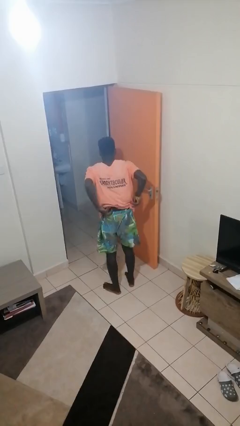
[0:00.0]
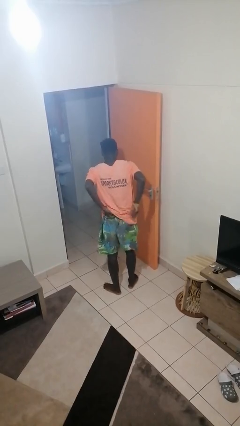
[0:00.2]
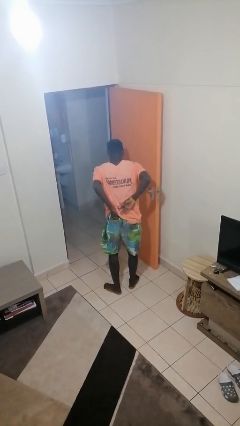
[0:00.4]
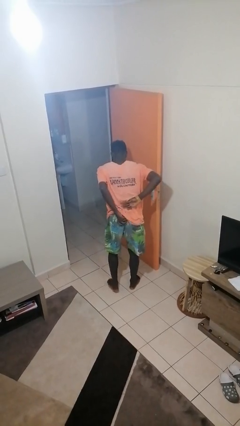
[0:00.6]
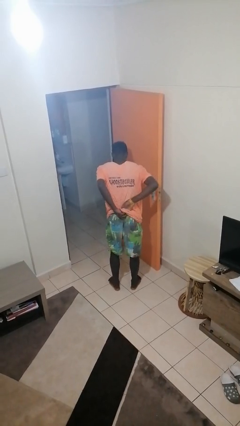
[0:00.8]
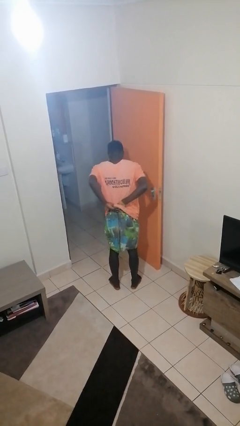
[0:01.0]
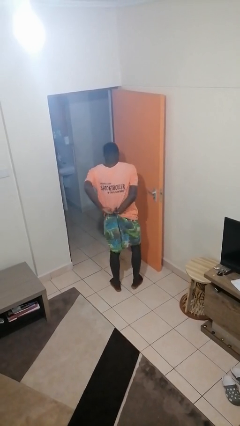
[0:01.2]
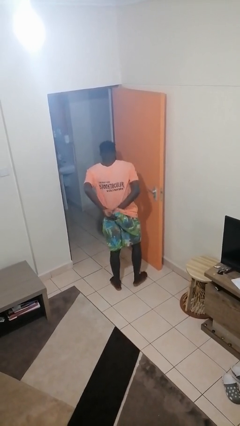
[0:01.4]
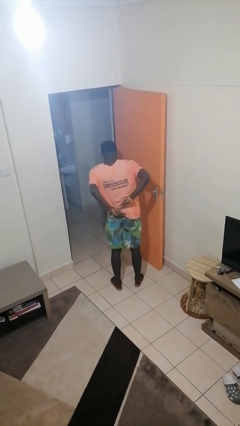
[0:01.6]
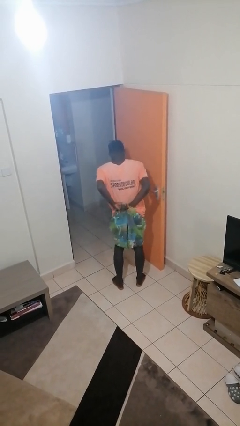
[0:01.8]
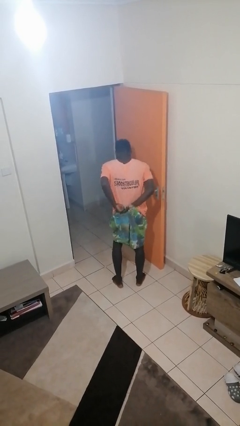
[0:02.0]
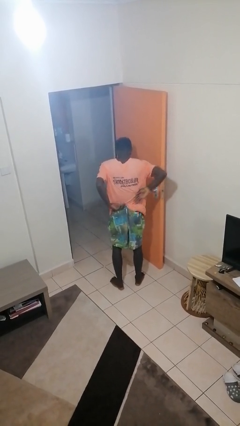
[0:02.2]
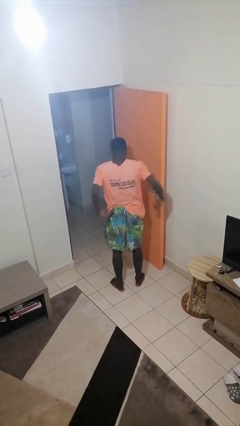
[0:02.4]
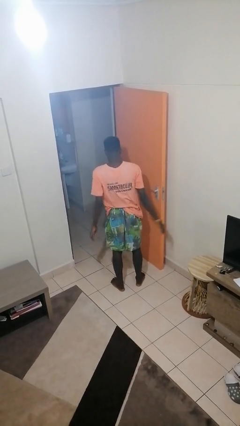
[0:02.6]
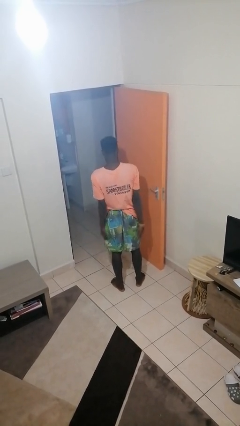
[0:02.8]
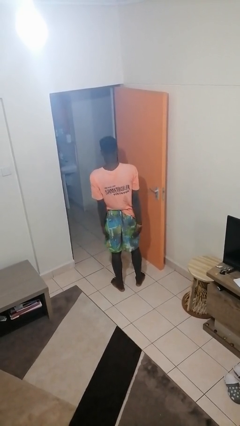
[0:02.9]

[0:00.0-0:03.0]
person tucks in shirt

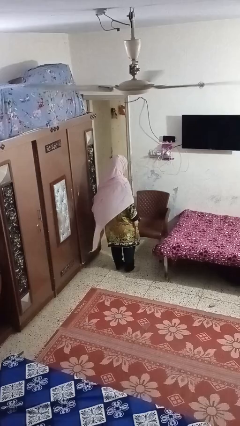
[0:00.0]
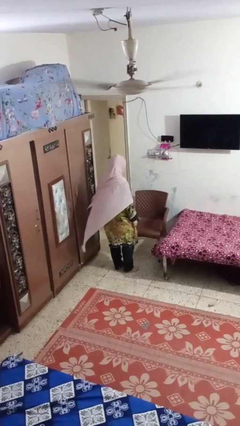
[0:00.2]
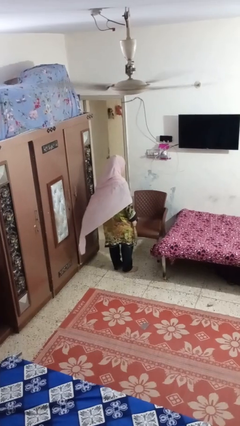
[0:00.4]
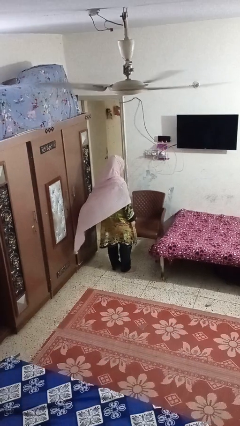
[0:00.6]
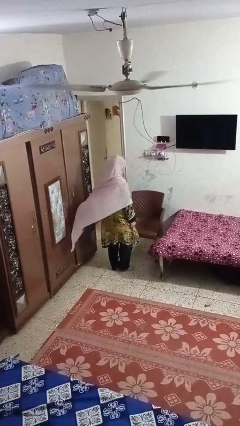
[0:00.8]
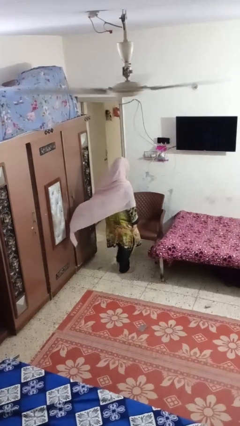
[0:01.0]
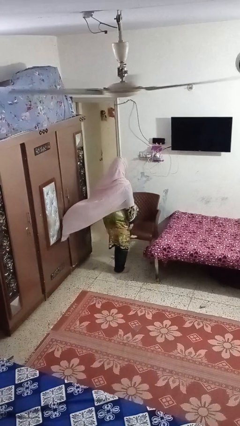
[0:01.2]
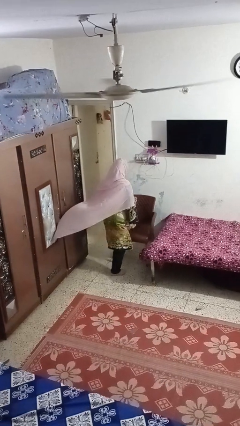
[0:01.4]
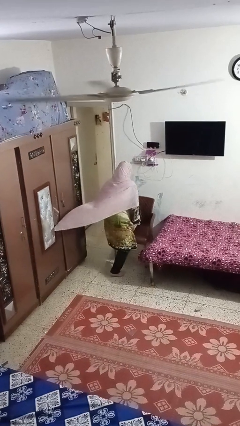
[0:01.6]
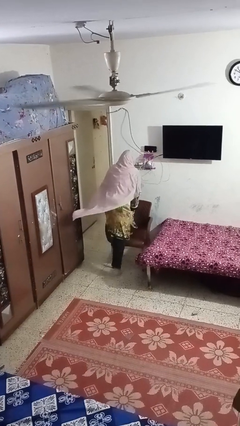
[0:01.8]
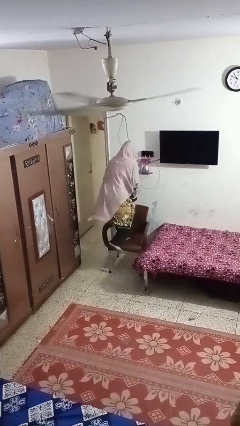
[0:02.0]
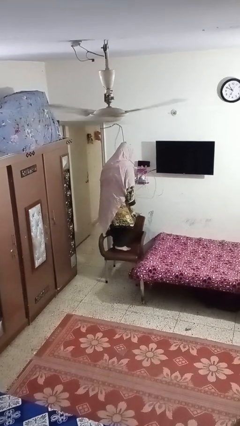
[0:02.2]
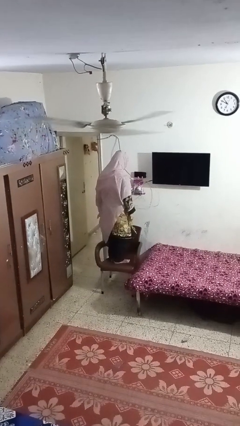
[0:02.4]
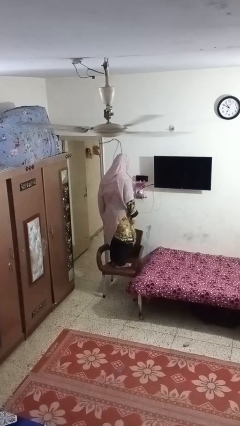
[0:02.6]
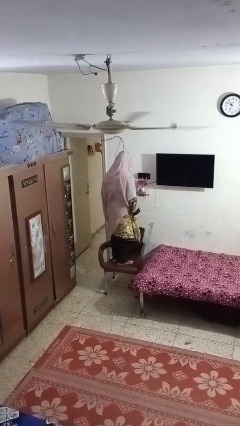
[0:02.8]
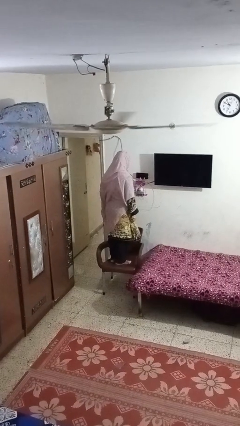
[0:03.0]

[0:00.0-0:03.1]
person climbs on chair

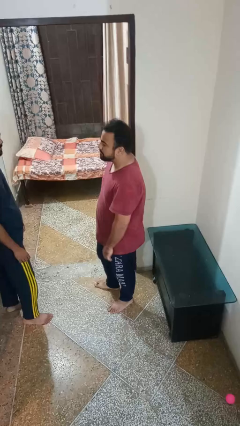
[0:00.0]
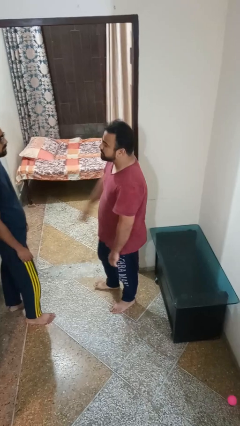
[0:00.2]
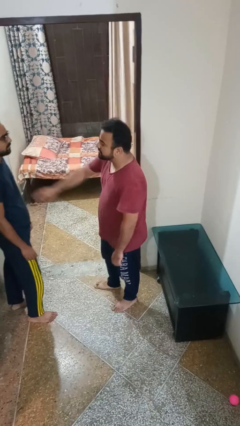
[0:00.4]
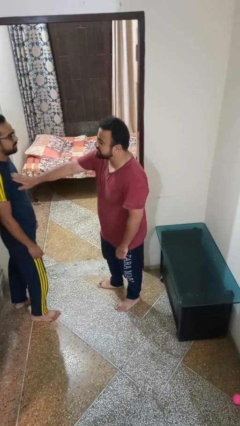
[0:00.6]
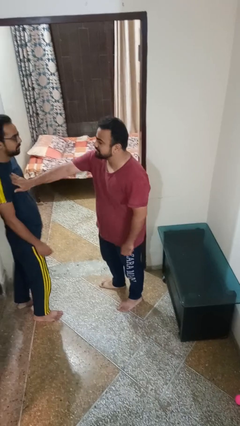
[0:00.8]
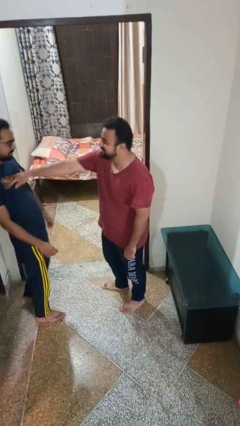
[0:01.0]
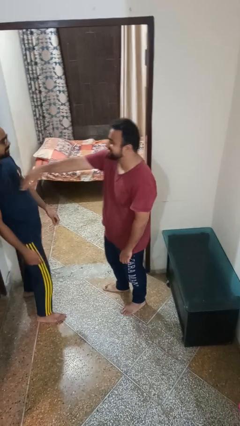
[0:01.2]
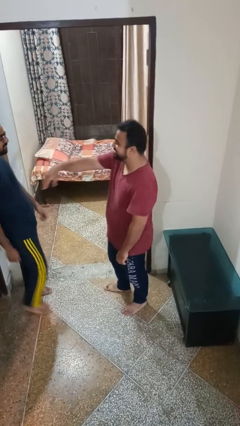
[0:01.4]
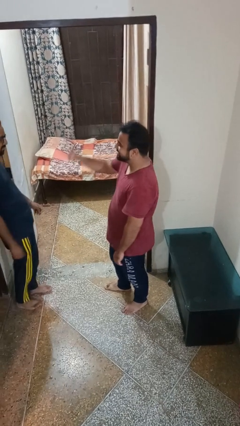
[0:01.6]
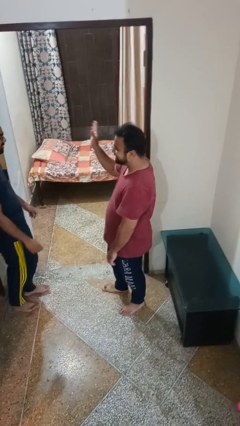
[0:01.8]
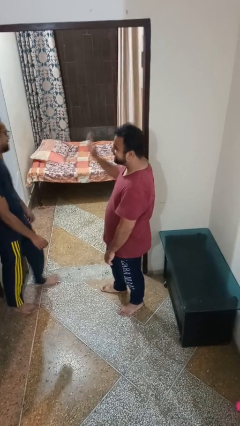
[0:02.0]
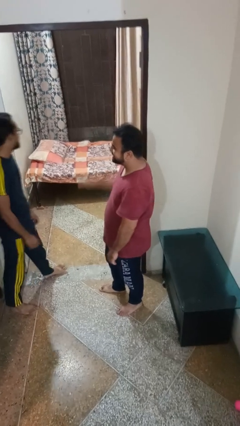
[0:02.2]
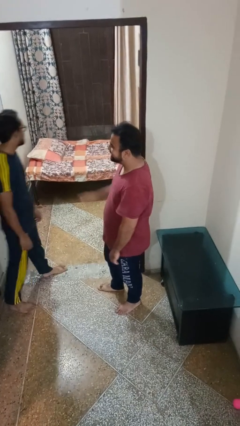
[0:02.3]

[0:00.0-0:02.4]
person shoves person

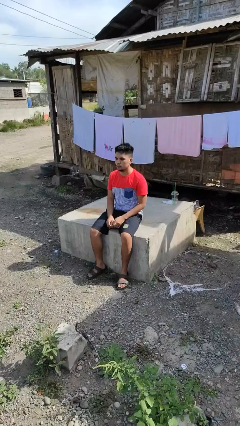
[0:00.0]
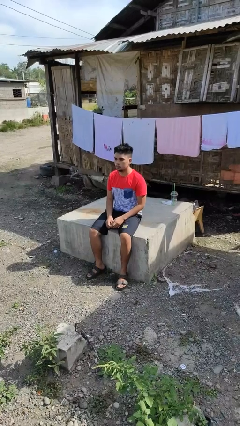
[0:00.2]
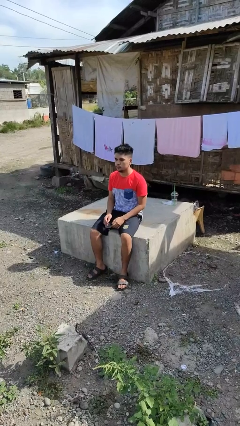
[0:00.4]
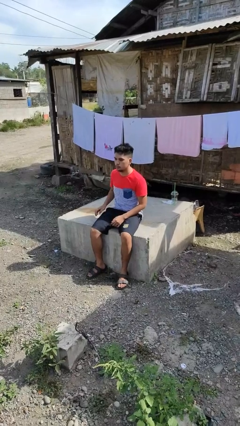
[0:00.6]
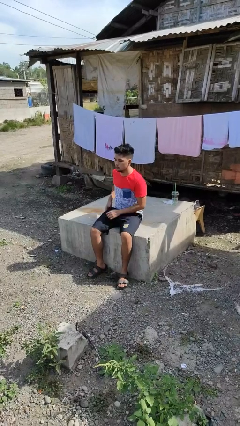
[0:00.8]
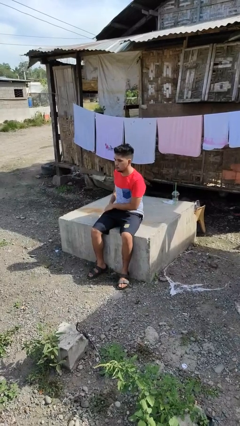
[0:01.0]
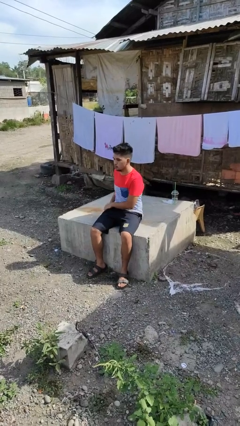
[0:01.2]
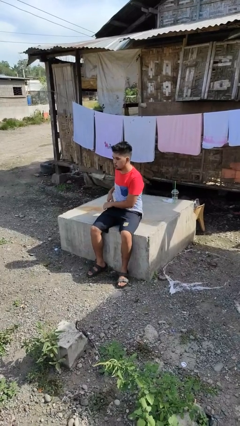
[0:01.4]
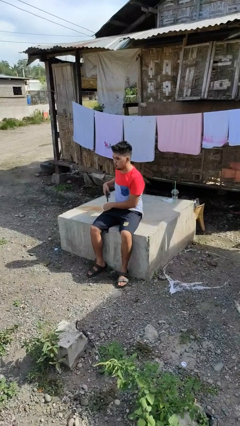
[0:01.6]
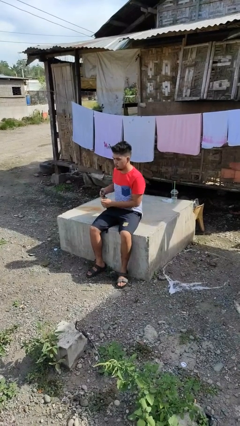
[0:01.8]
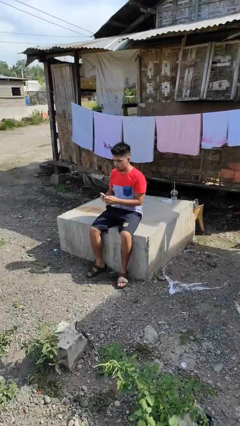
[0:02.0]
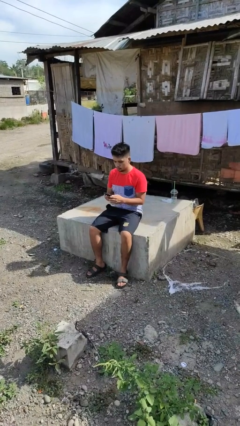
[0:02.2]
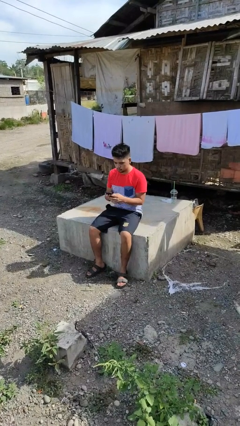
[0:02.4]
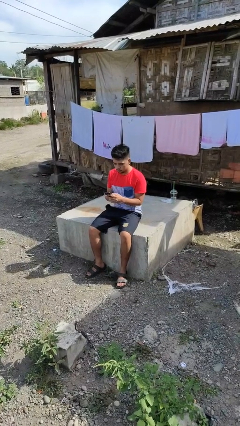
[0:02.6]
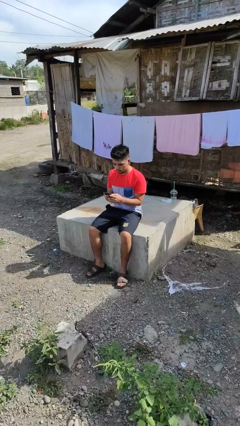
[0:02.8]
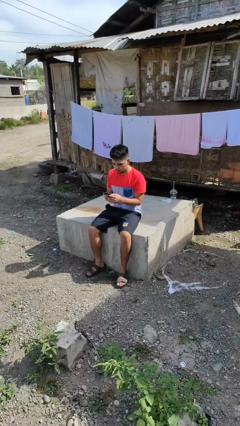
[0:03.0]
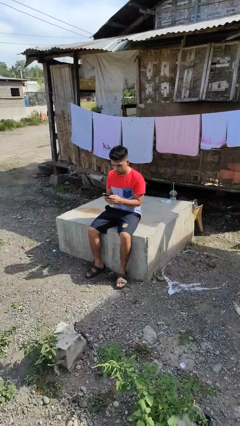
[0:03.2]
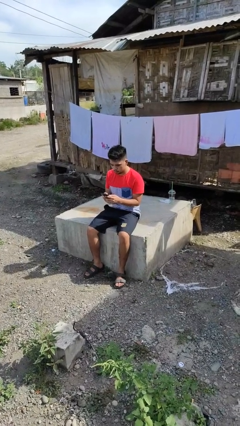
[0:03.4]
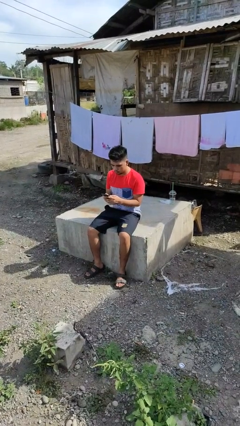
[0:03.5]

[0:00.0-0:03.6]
person takes phone from pocket

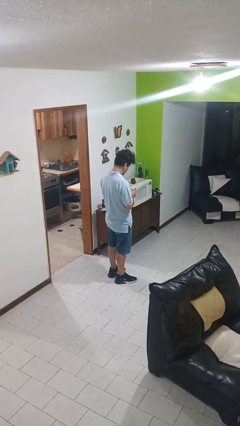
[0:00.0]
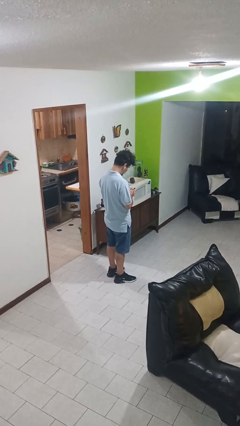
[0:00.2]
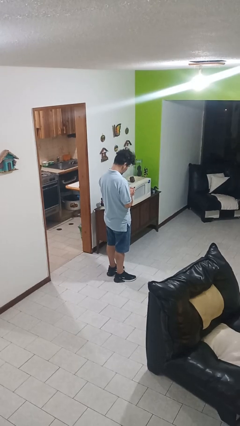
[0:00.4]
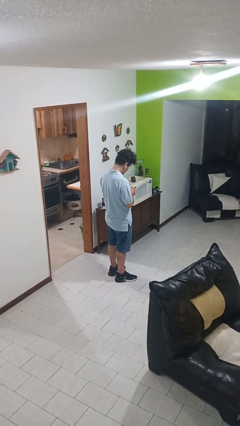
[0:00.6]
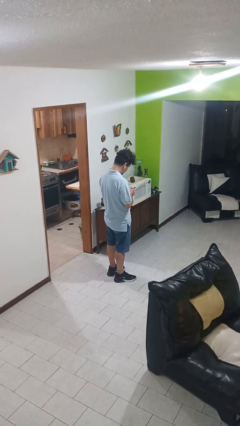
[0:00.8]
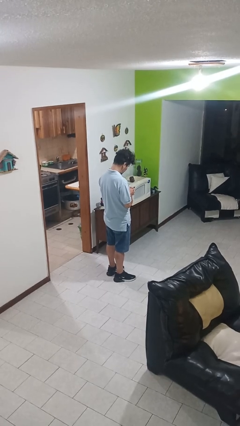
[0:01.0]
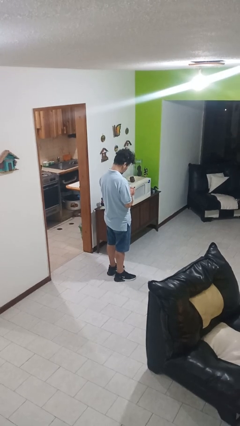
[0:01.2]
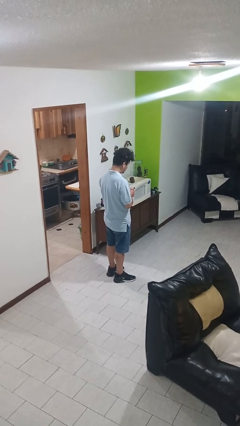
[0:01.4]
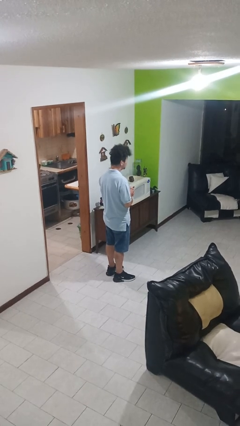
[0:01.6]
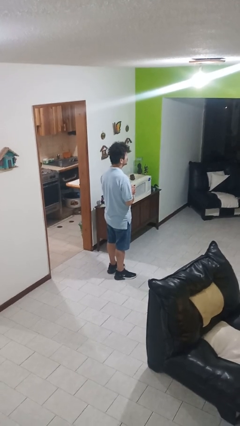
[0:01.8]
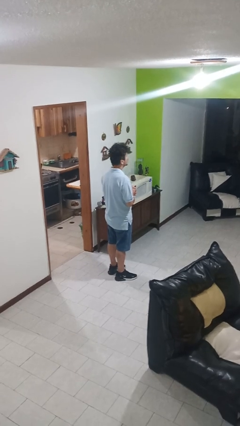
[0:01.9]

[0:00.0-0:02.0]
person prays

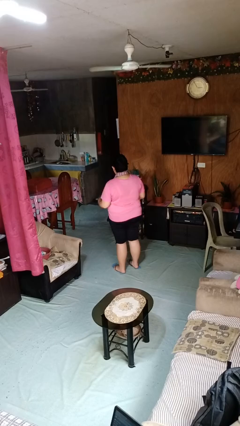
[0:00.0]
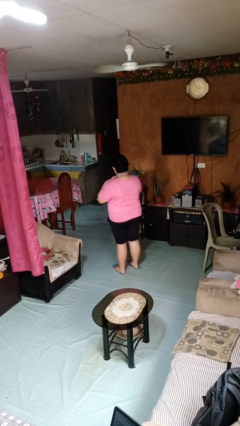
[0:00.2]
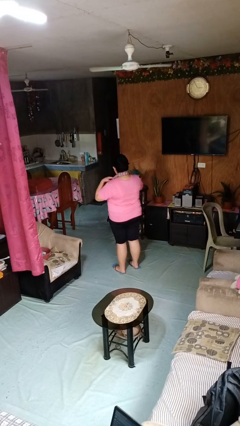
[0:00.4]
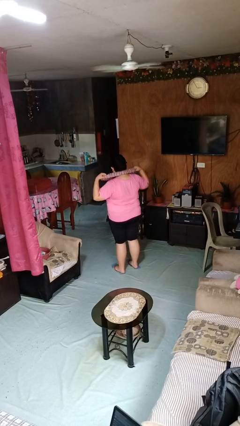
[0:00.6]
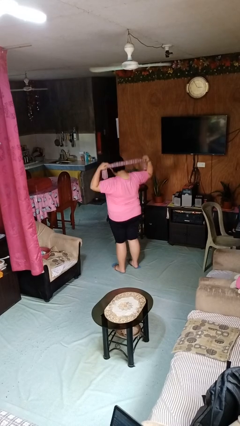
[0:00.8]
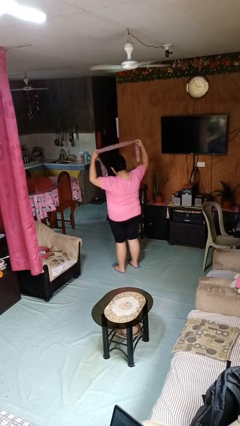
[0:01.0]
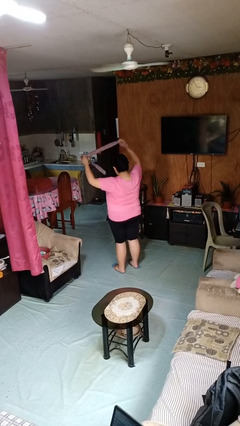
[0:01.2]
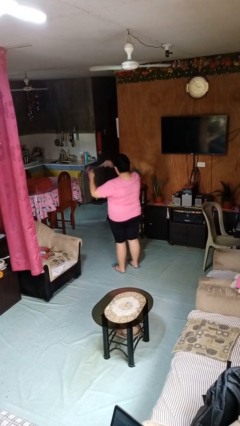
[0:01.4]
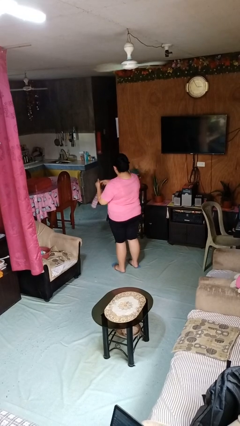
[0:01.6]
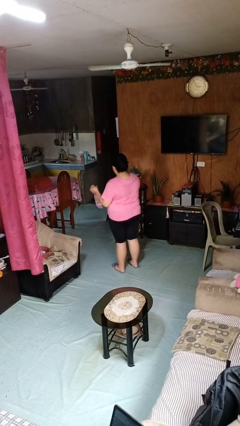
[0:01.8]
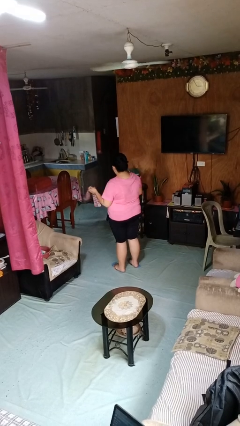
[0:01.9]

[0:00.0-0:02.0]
person takes off necktie

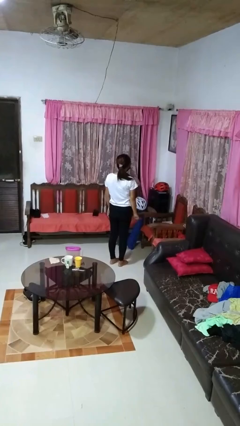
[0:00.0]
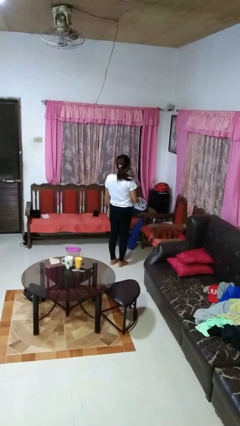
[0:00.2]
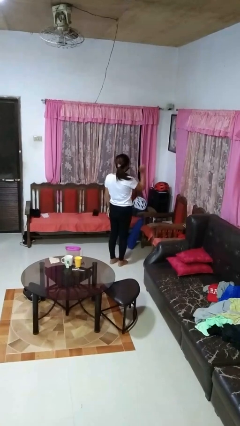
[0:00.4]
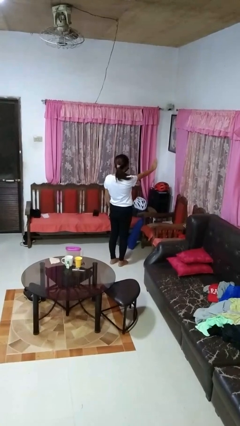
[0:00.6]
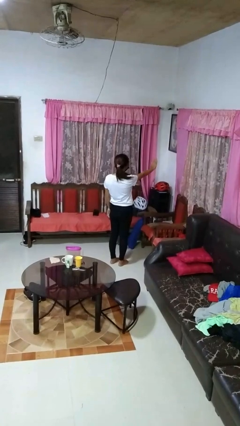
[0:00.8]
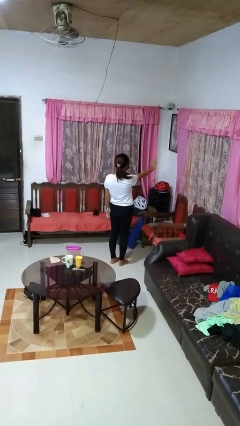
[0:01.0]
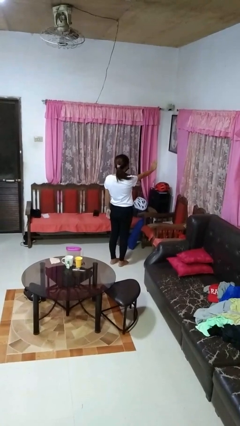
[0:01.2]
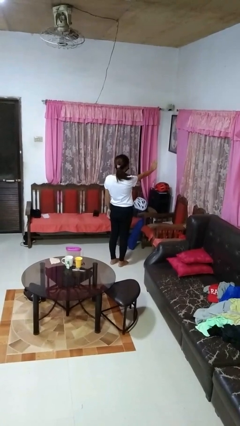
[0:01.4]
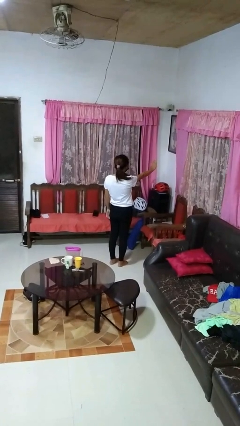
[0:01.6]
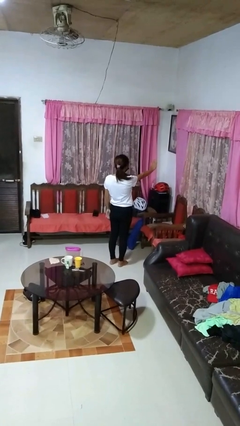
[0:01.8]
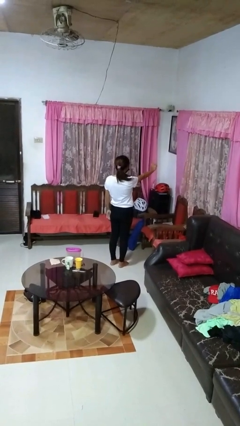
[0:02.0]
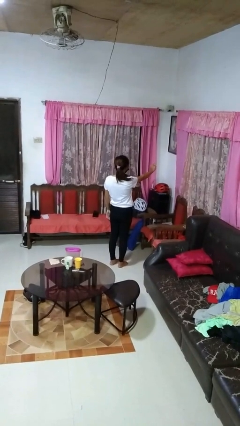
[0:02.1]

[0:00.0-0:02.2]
person gestures stop
